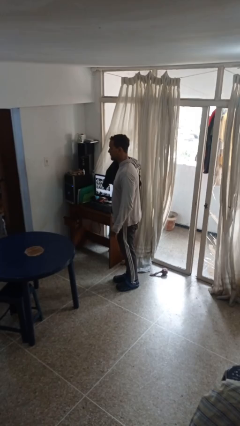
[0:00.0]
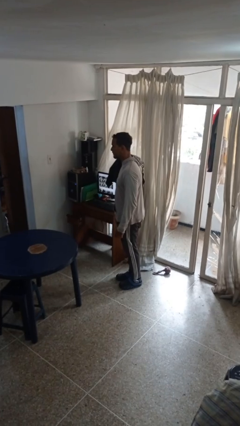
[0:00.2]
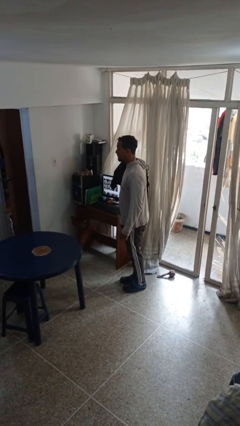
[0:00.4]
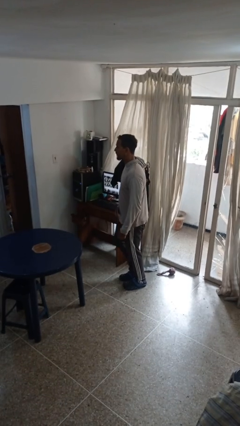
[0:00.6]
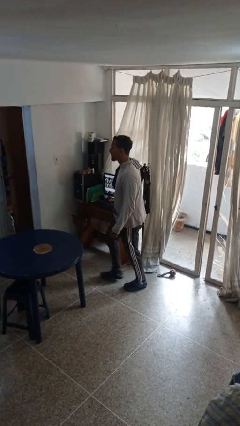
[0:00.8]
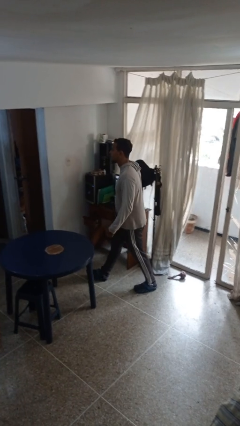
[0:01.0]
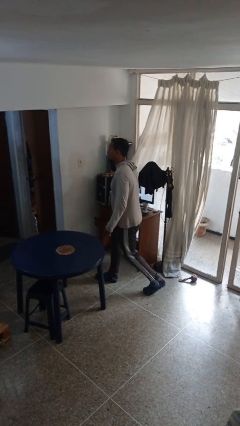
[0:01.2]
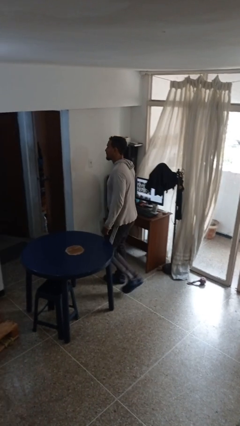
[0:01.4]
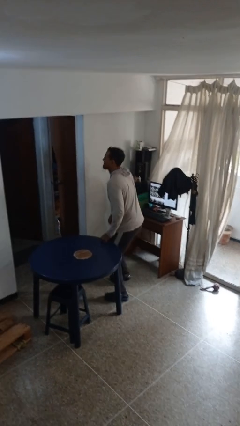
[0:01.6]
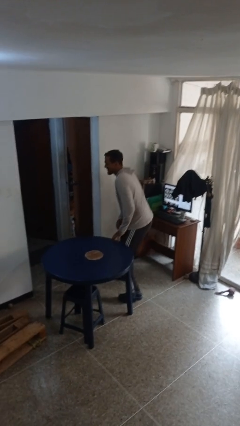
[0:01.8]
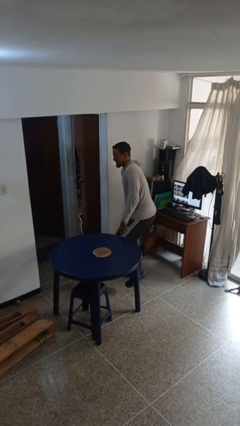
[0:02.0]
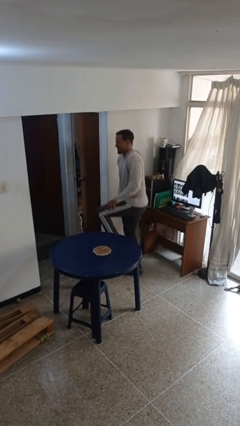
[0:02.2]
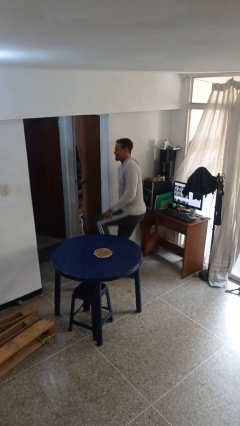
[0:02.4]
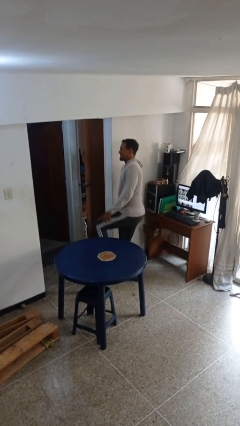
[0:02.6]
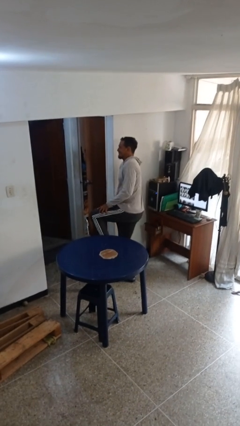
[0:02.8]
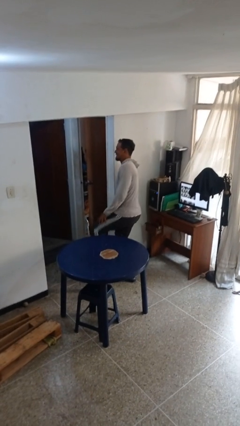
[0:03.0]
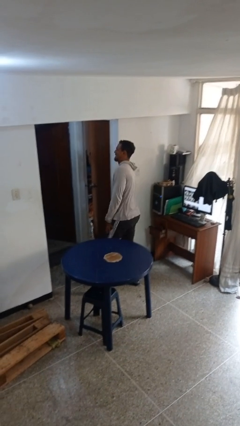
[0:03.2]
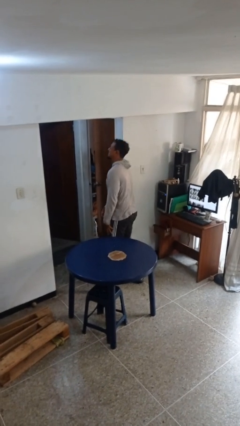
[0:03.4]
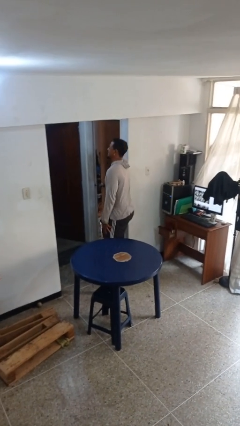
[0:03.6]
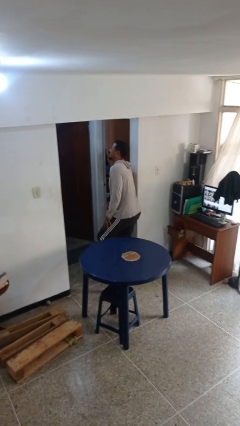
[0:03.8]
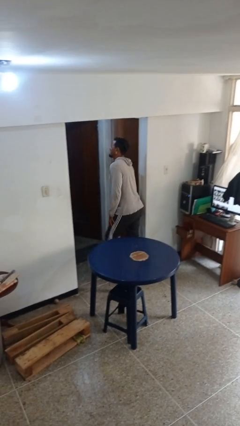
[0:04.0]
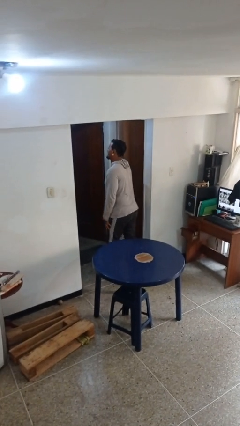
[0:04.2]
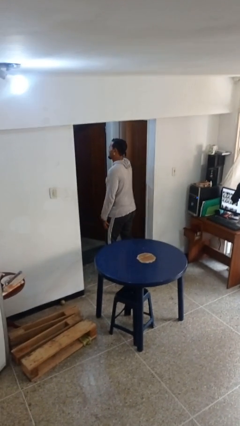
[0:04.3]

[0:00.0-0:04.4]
person bumps into table

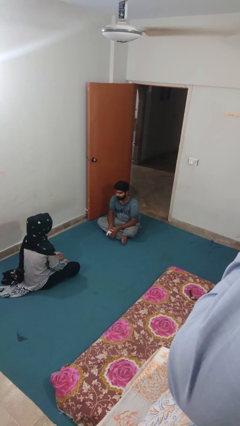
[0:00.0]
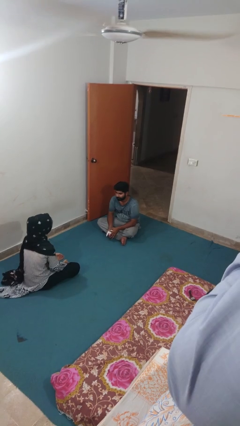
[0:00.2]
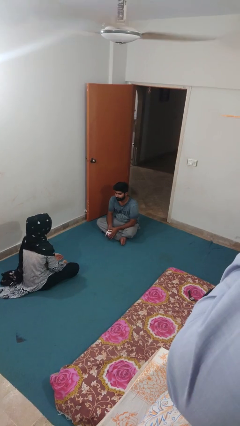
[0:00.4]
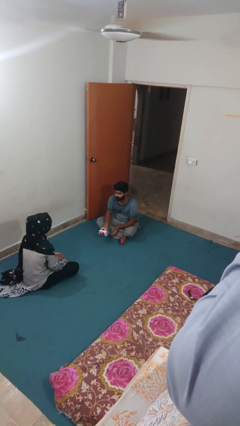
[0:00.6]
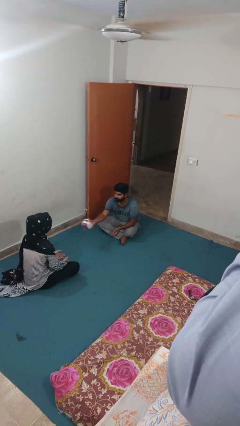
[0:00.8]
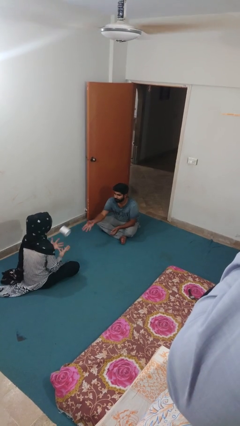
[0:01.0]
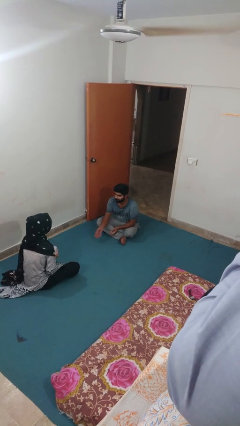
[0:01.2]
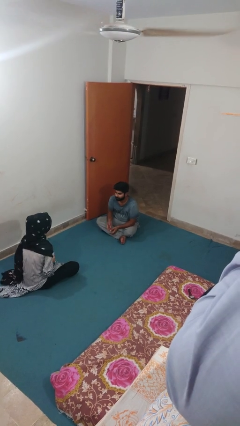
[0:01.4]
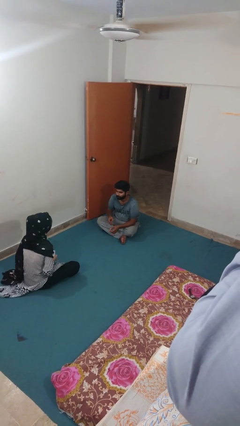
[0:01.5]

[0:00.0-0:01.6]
person throws object to person

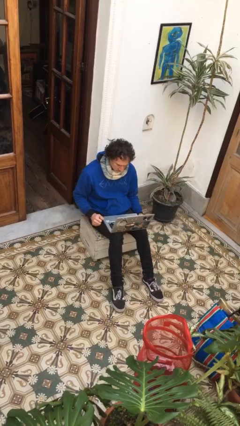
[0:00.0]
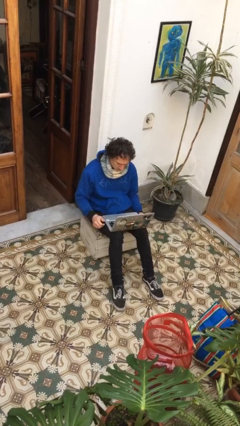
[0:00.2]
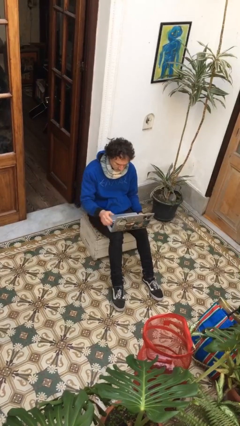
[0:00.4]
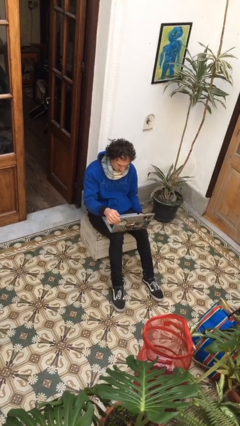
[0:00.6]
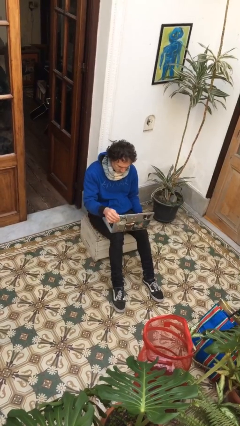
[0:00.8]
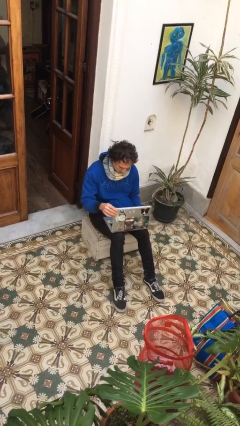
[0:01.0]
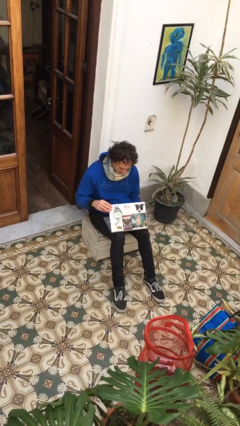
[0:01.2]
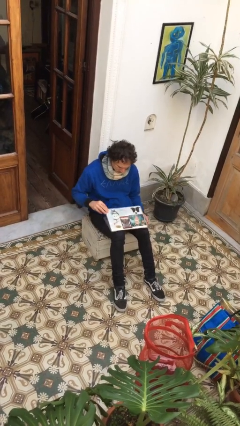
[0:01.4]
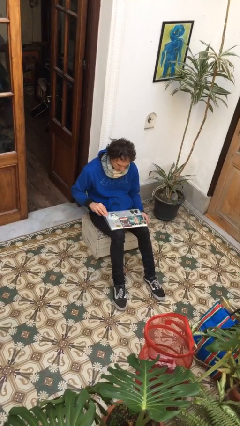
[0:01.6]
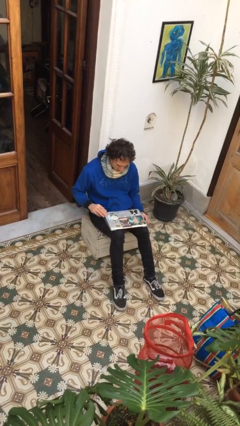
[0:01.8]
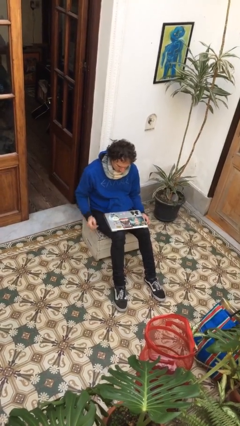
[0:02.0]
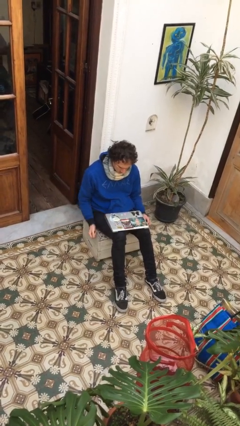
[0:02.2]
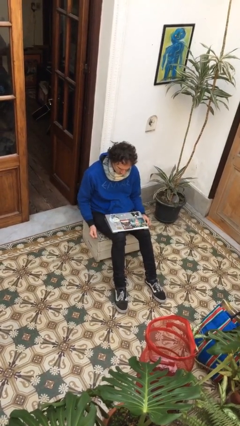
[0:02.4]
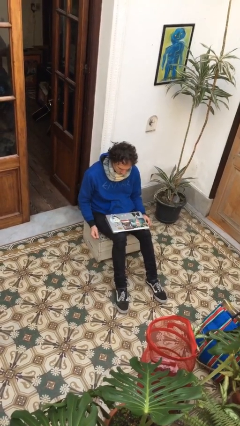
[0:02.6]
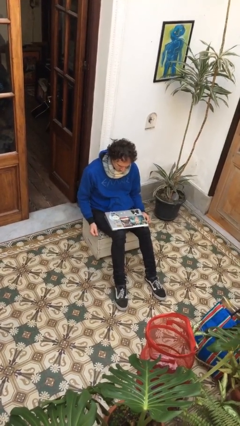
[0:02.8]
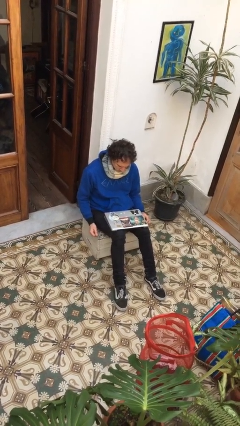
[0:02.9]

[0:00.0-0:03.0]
person closes laptop

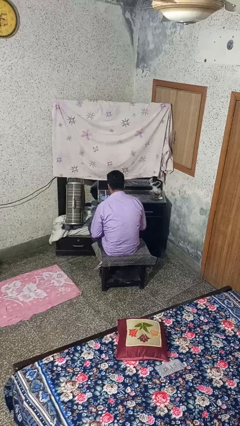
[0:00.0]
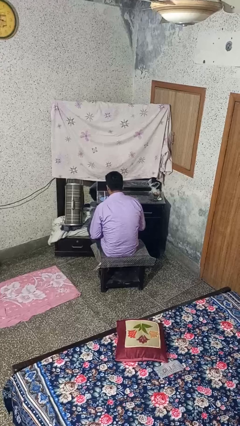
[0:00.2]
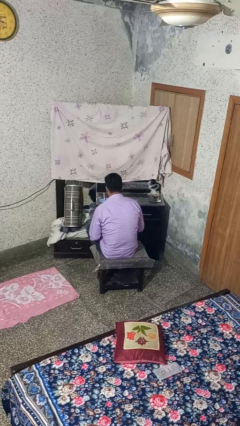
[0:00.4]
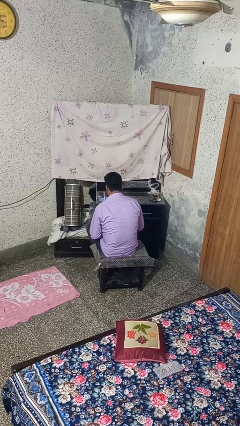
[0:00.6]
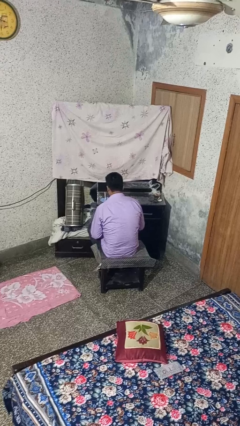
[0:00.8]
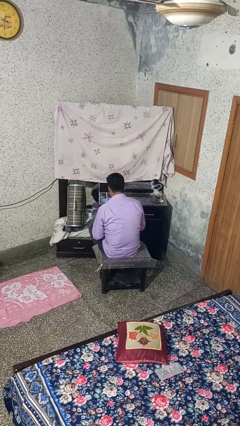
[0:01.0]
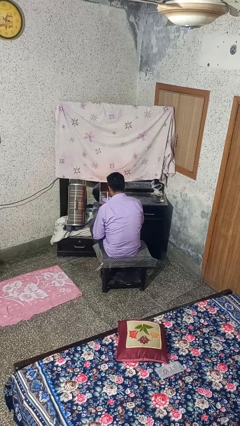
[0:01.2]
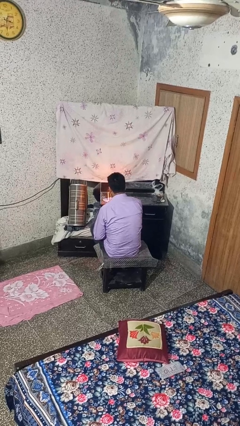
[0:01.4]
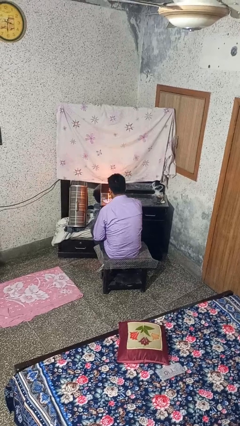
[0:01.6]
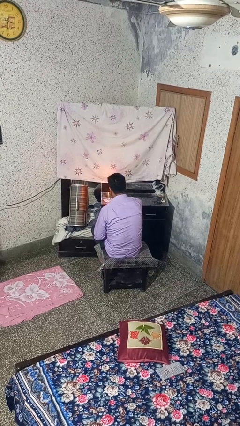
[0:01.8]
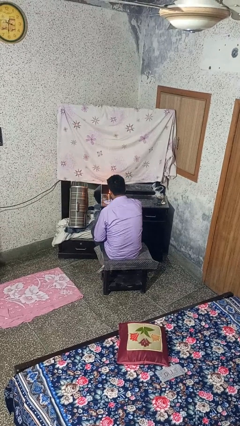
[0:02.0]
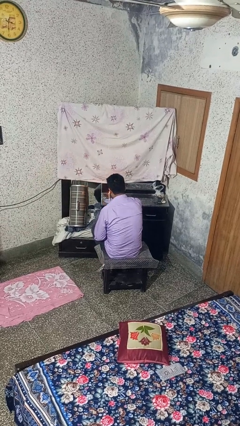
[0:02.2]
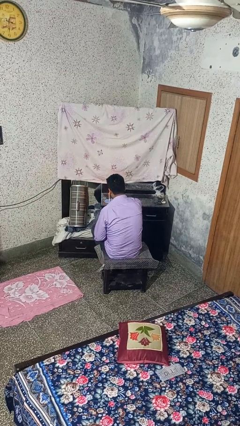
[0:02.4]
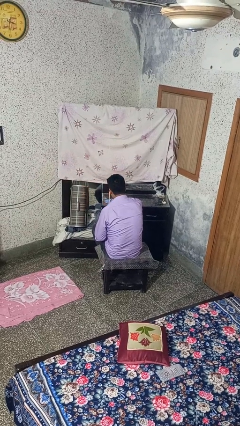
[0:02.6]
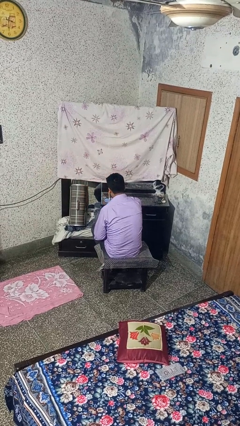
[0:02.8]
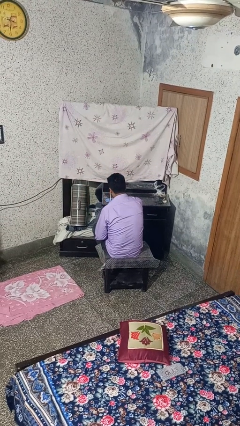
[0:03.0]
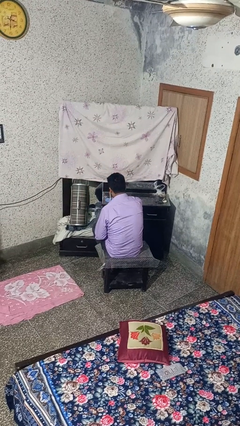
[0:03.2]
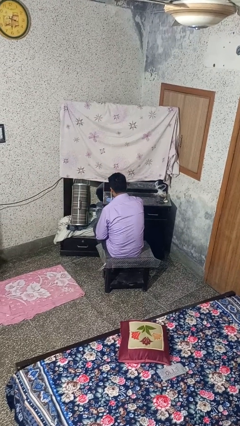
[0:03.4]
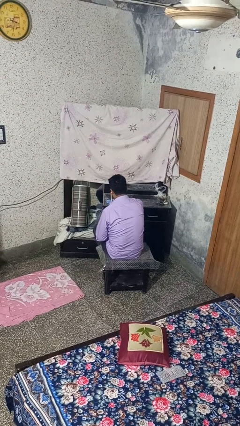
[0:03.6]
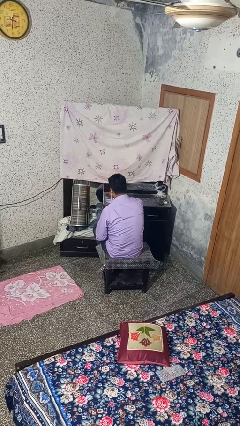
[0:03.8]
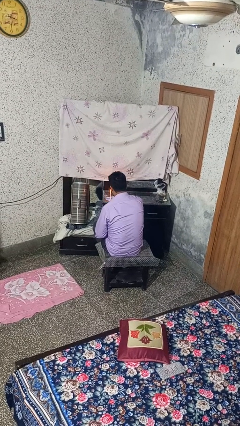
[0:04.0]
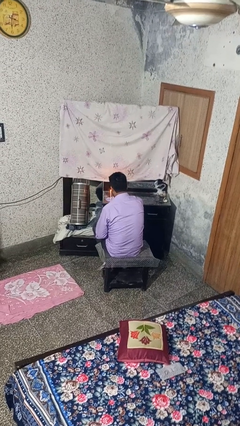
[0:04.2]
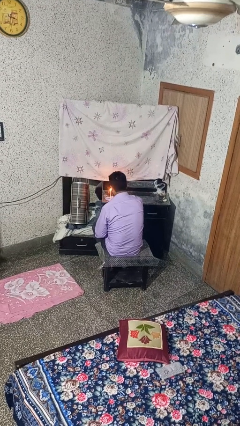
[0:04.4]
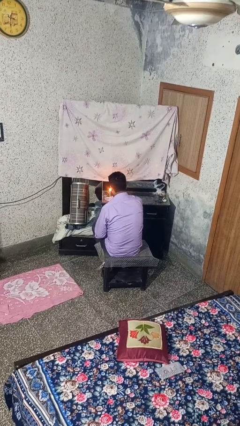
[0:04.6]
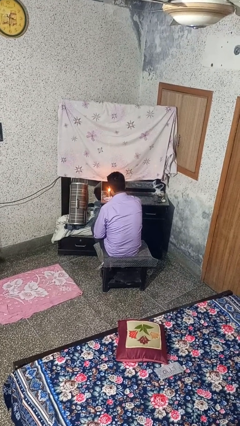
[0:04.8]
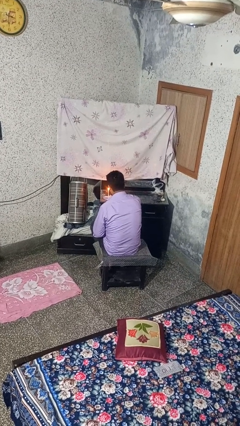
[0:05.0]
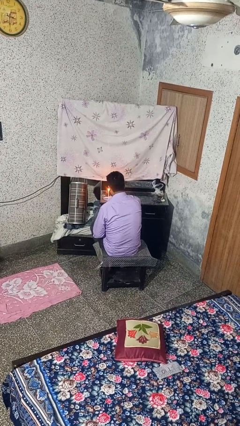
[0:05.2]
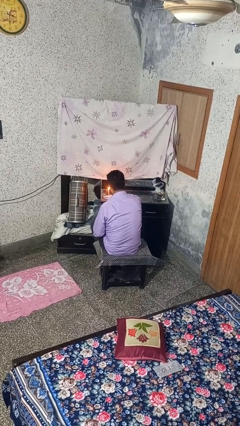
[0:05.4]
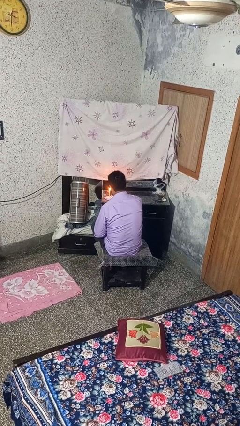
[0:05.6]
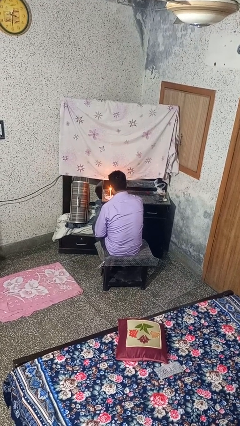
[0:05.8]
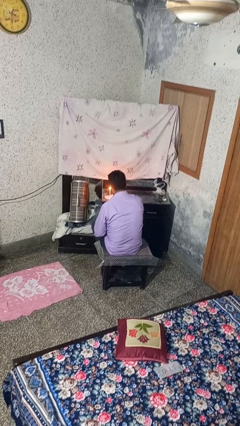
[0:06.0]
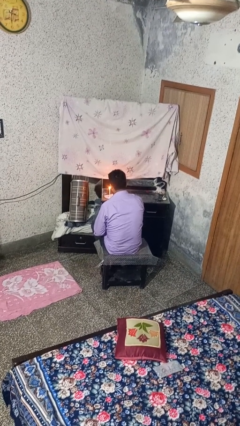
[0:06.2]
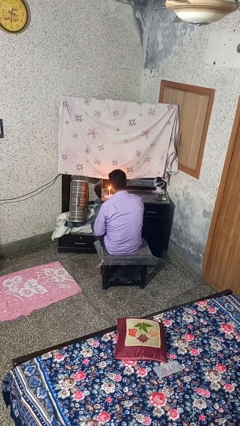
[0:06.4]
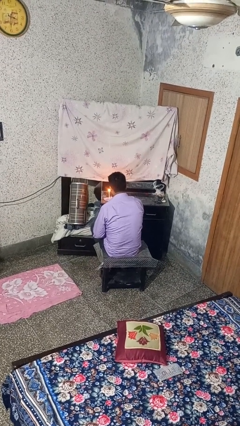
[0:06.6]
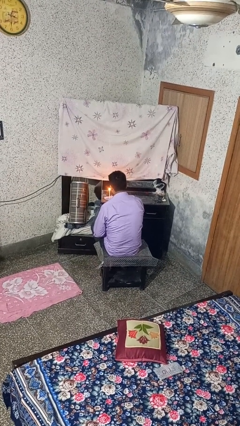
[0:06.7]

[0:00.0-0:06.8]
person lights candle

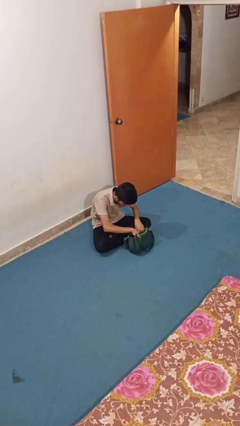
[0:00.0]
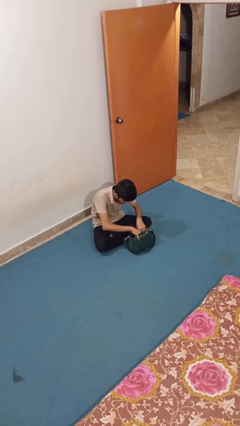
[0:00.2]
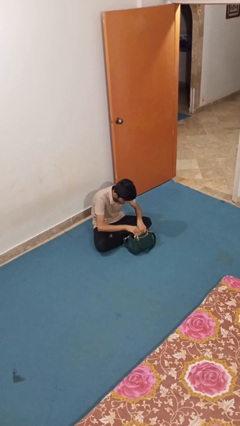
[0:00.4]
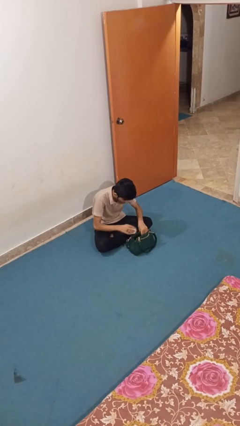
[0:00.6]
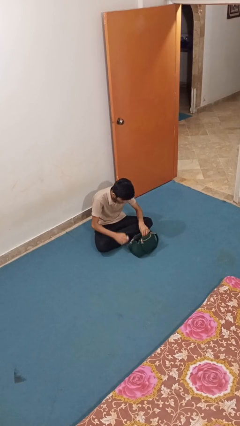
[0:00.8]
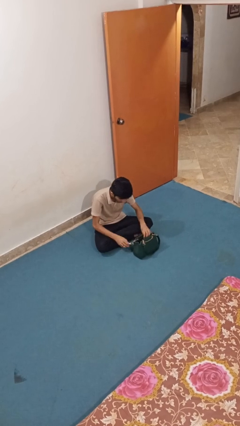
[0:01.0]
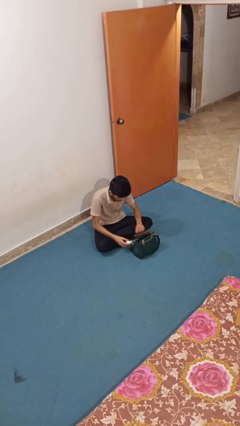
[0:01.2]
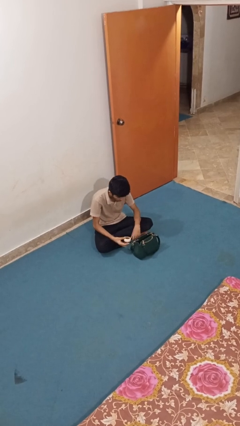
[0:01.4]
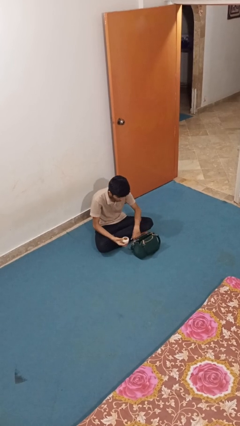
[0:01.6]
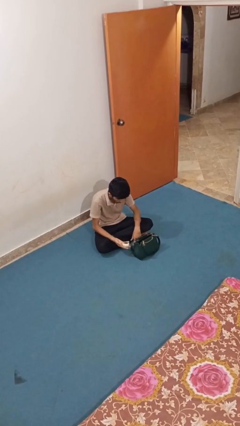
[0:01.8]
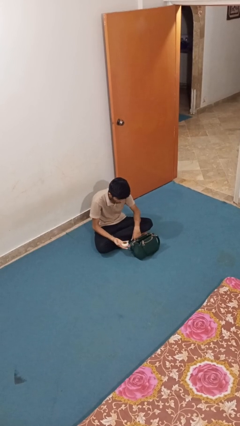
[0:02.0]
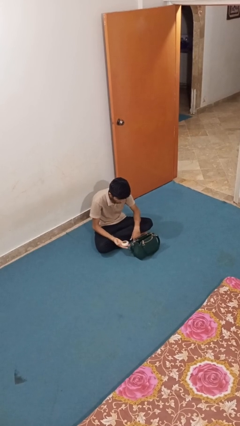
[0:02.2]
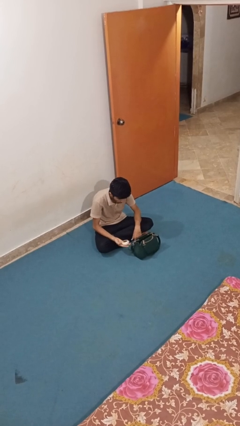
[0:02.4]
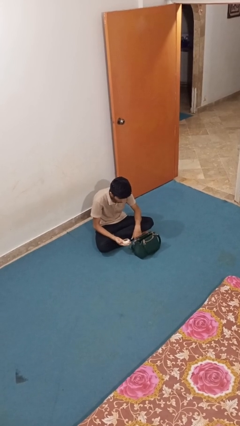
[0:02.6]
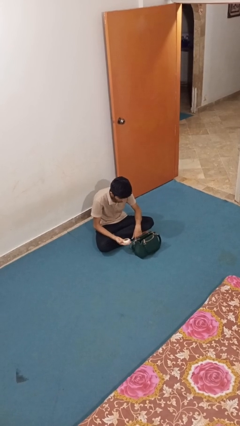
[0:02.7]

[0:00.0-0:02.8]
person takes object from purse
